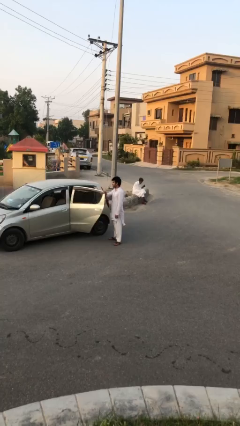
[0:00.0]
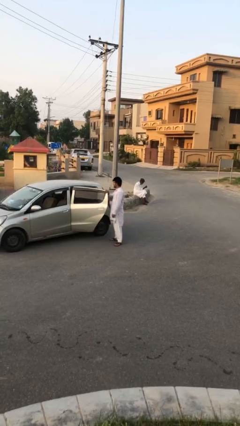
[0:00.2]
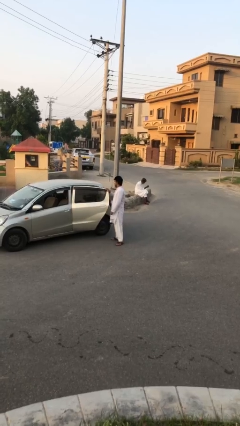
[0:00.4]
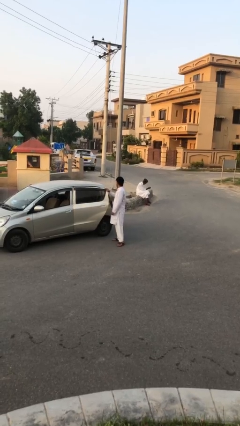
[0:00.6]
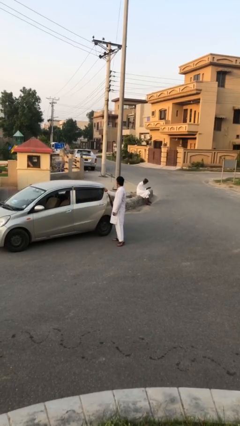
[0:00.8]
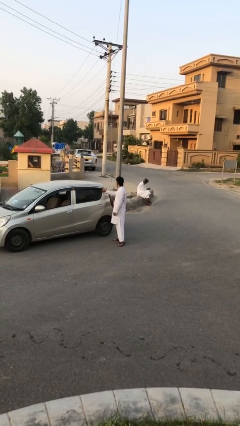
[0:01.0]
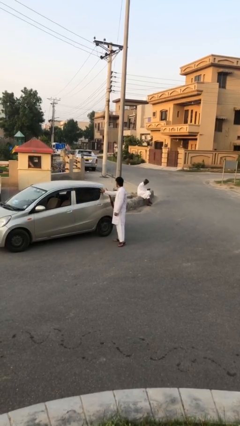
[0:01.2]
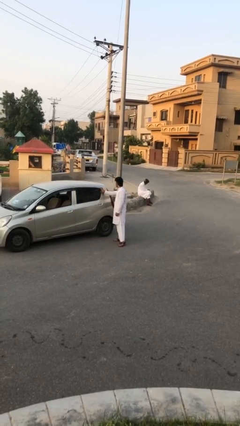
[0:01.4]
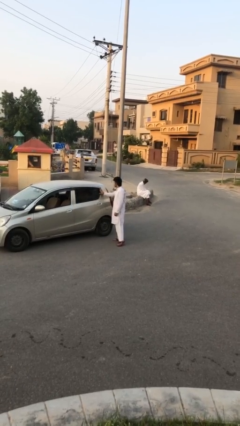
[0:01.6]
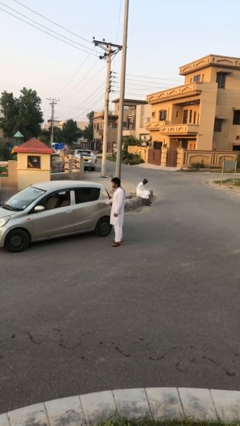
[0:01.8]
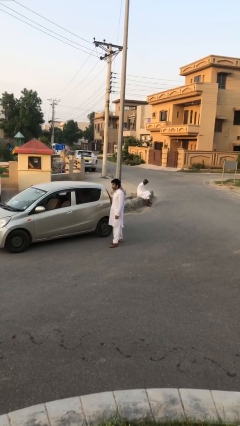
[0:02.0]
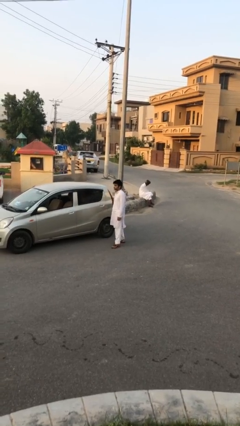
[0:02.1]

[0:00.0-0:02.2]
person closes car door

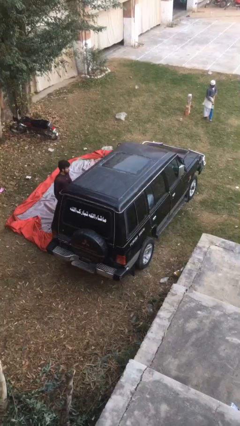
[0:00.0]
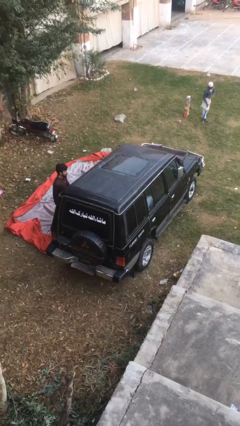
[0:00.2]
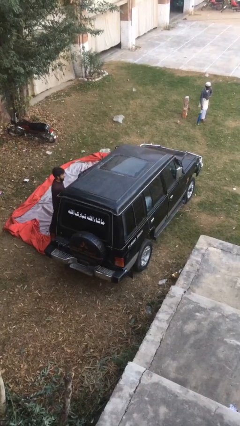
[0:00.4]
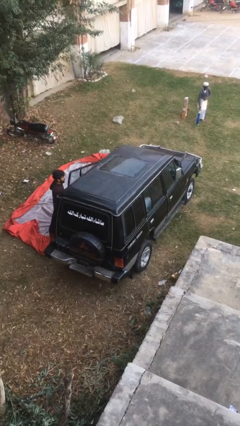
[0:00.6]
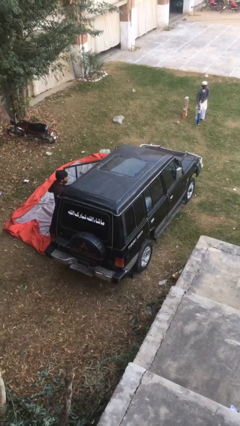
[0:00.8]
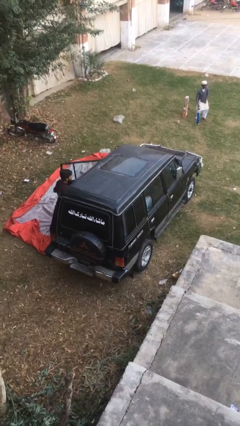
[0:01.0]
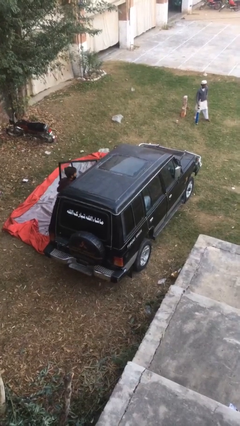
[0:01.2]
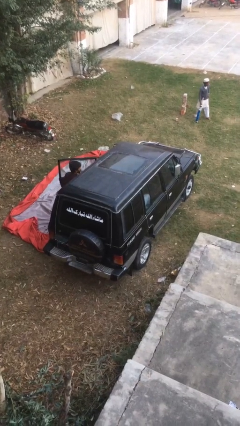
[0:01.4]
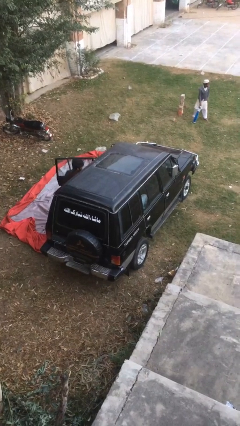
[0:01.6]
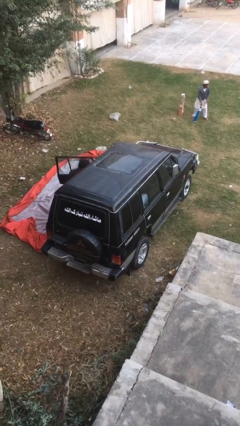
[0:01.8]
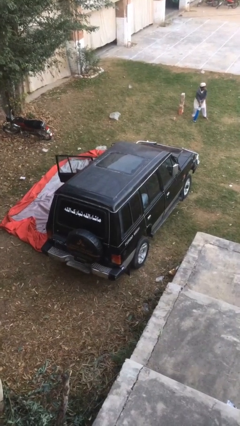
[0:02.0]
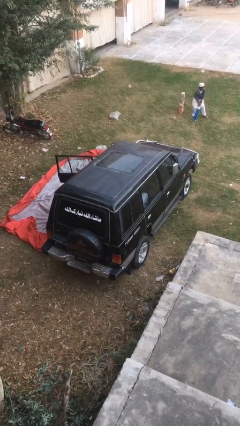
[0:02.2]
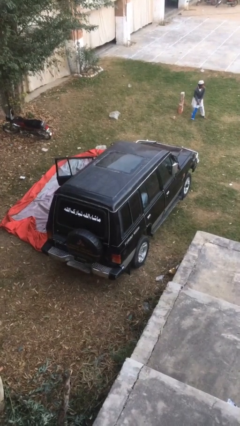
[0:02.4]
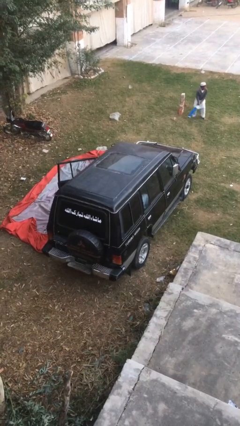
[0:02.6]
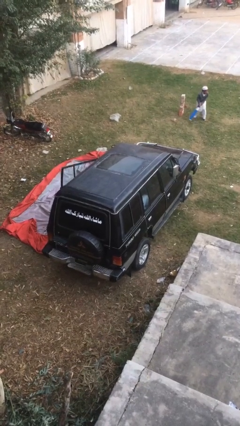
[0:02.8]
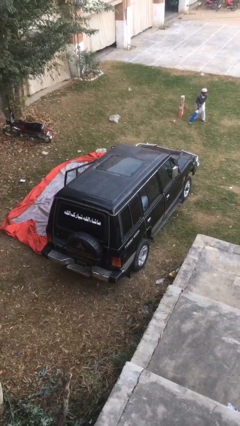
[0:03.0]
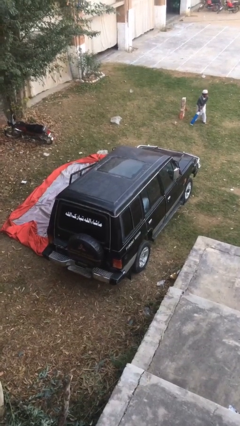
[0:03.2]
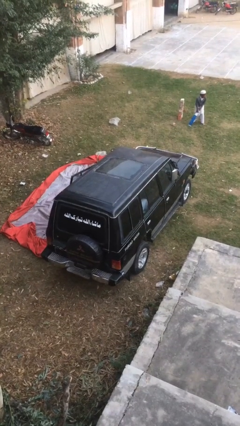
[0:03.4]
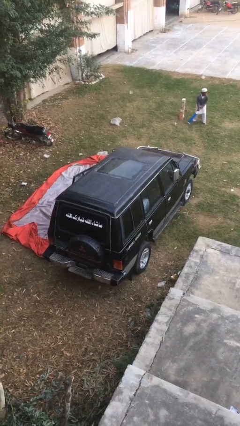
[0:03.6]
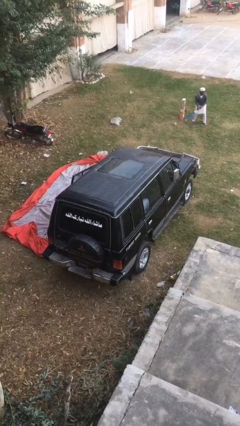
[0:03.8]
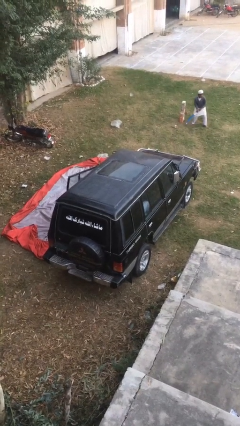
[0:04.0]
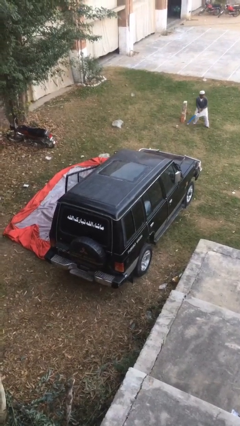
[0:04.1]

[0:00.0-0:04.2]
car picks up person

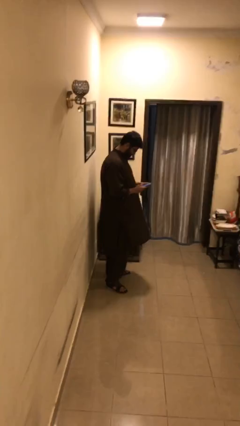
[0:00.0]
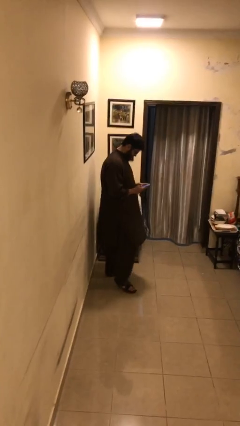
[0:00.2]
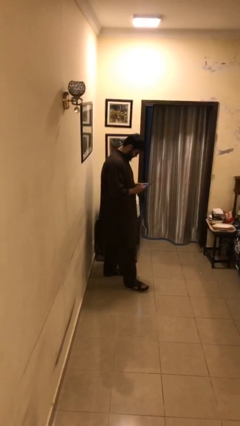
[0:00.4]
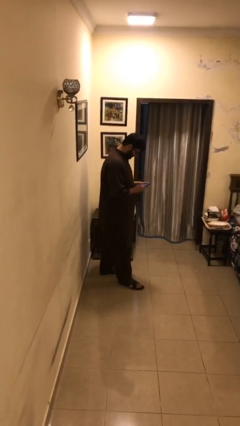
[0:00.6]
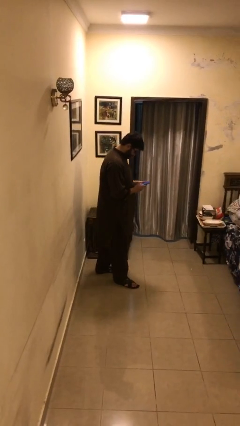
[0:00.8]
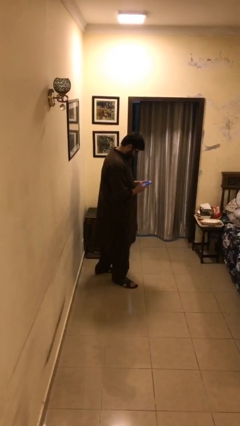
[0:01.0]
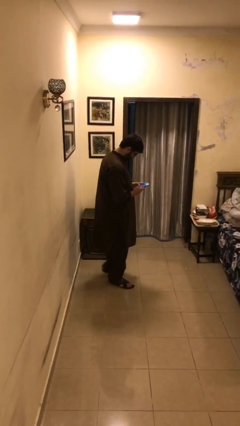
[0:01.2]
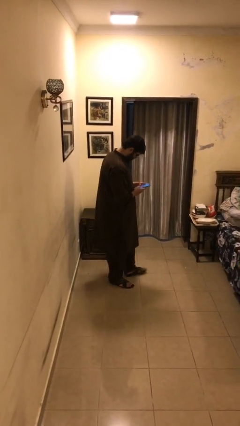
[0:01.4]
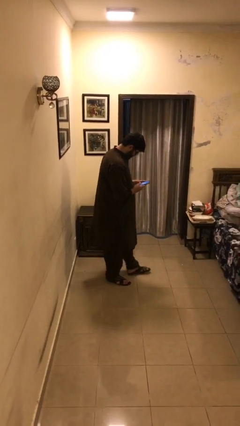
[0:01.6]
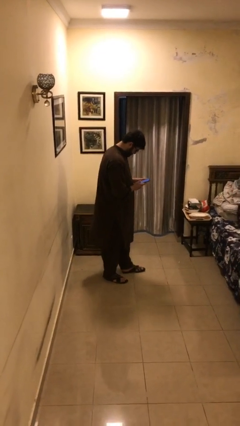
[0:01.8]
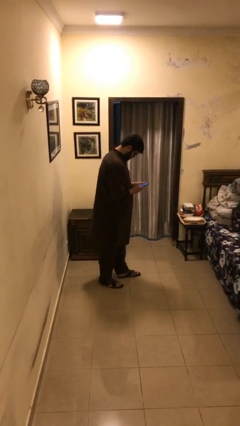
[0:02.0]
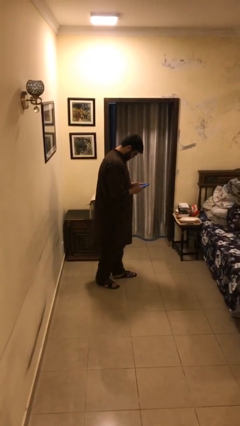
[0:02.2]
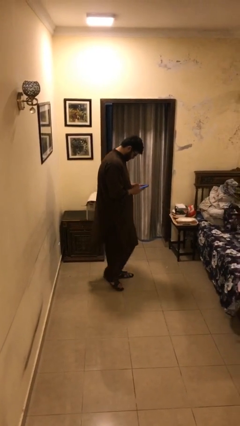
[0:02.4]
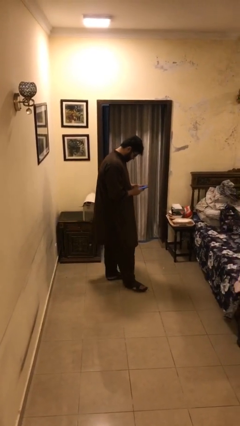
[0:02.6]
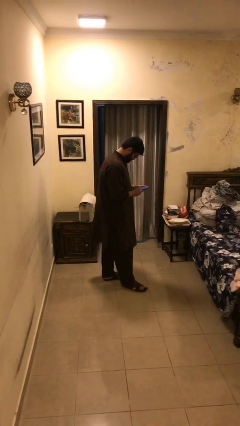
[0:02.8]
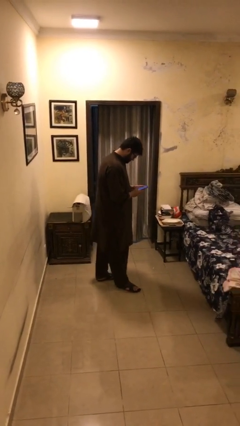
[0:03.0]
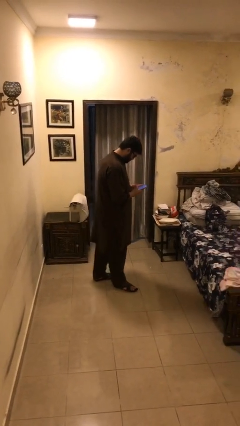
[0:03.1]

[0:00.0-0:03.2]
person texts on phone

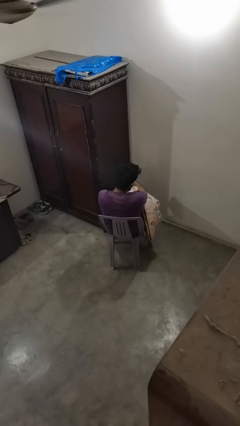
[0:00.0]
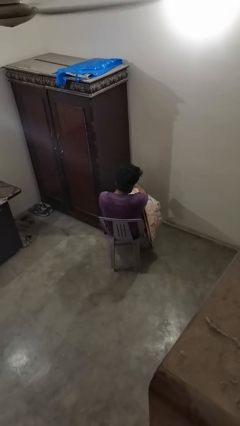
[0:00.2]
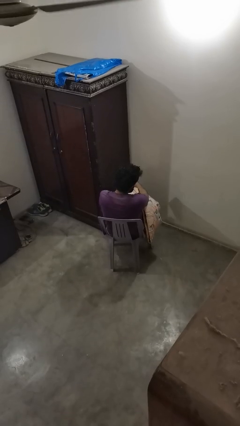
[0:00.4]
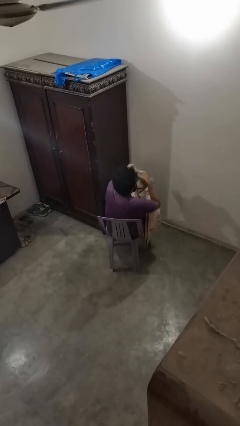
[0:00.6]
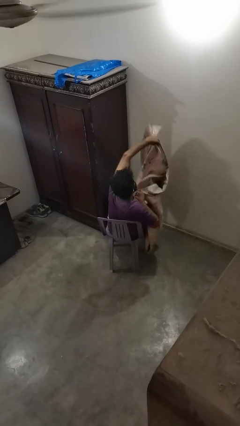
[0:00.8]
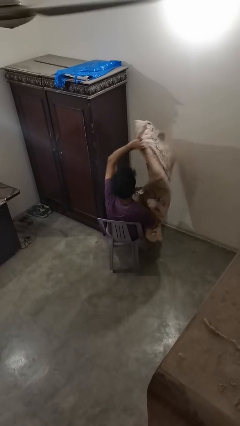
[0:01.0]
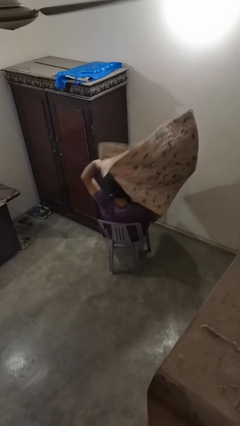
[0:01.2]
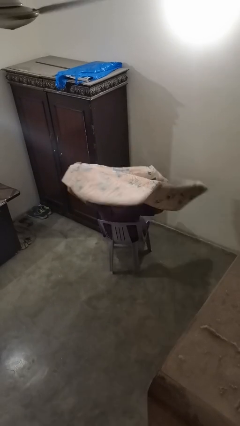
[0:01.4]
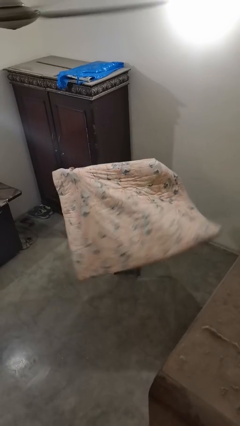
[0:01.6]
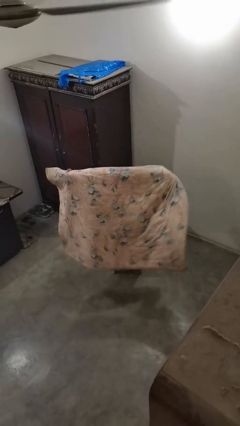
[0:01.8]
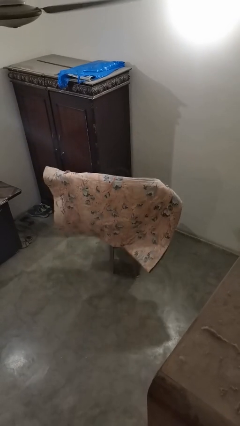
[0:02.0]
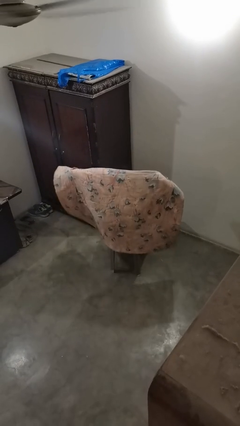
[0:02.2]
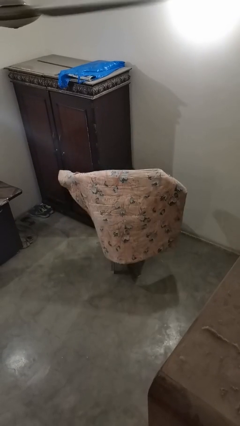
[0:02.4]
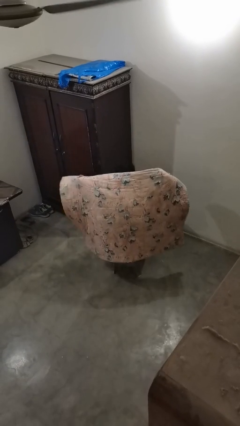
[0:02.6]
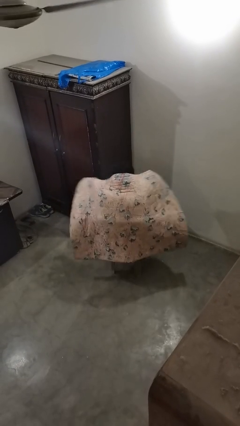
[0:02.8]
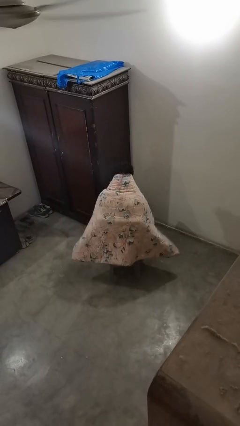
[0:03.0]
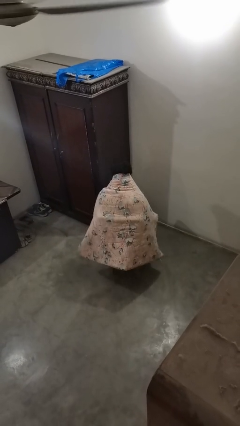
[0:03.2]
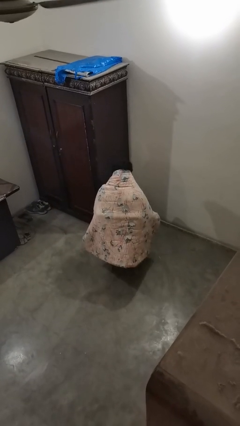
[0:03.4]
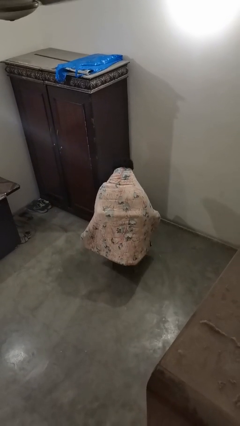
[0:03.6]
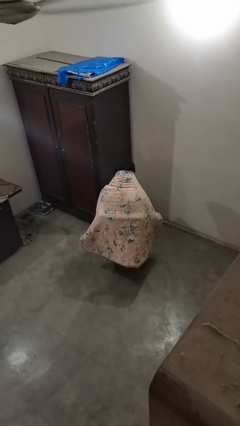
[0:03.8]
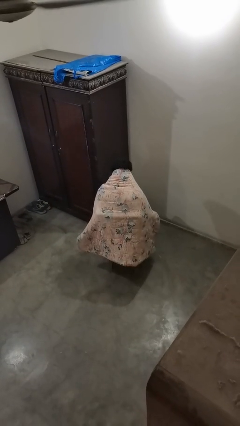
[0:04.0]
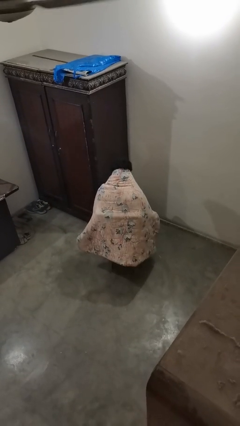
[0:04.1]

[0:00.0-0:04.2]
person covers with blanket

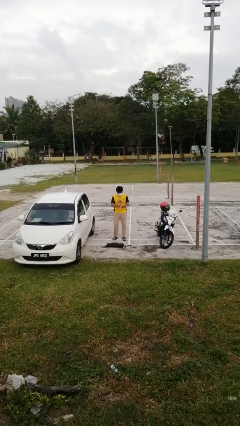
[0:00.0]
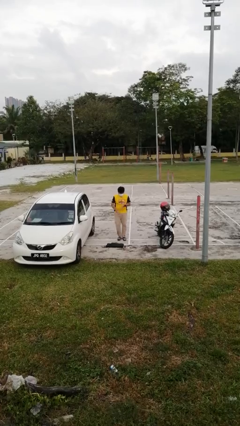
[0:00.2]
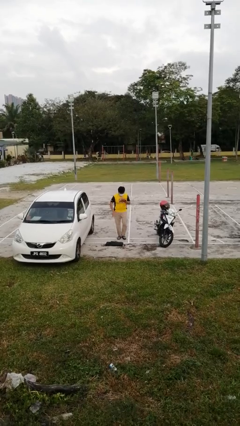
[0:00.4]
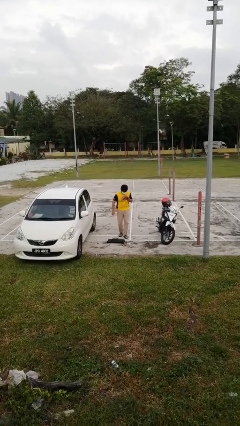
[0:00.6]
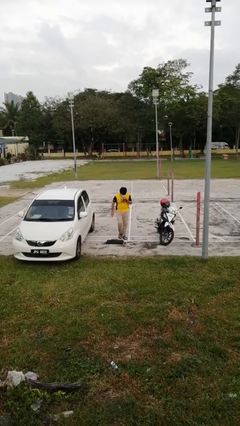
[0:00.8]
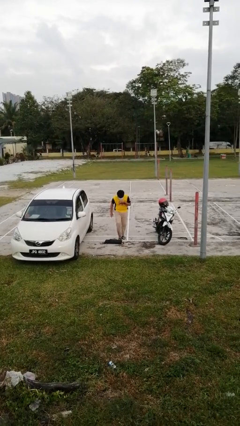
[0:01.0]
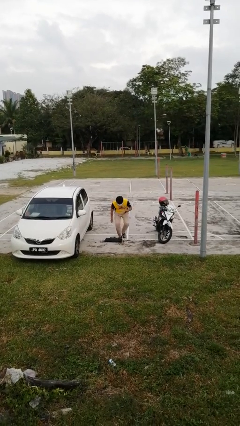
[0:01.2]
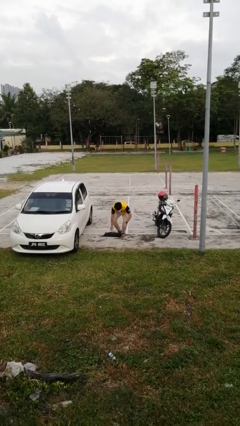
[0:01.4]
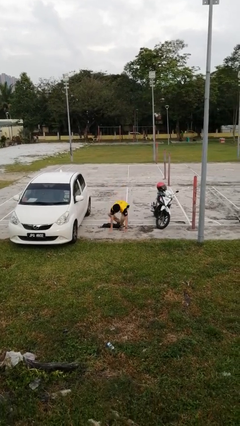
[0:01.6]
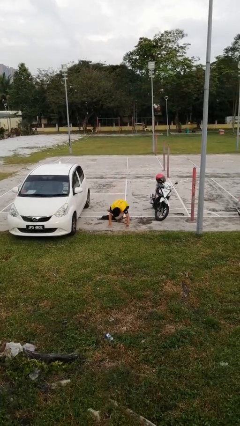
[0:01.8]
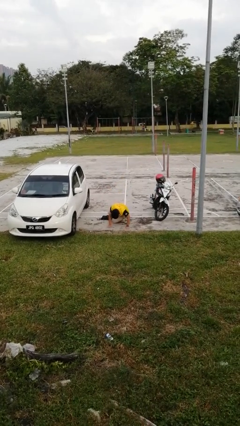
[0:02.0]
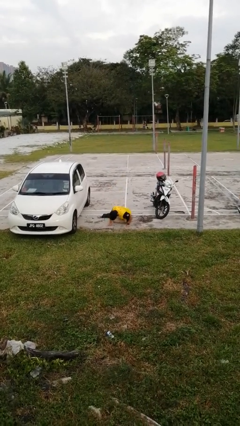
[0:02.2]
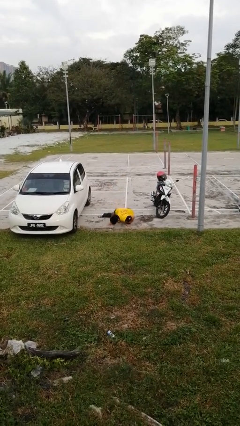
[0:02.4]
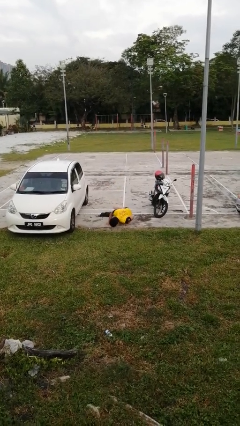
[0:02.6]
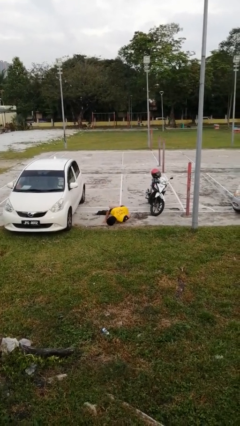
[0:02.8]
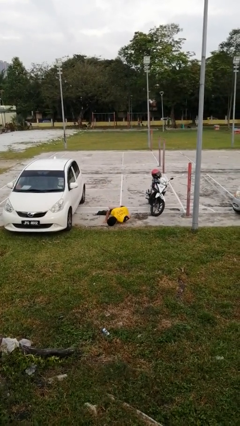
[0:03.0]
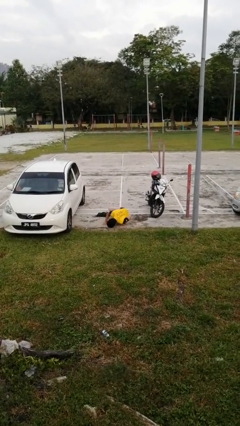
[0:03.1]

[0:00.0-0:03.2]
person trips on object on floor

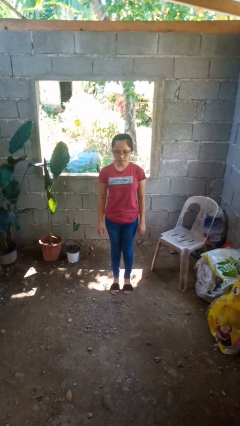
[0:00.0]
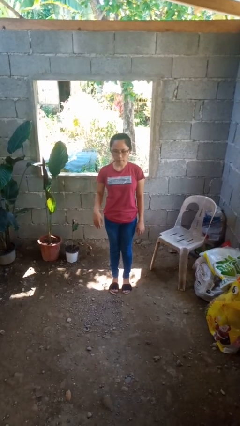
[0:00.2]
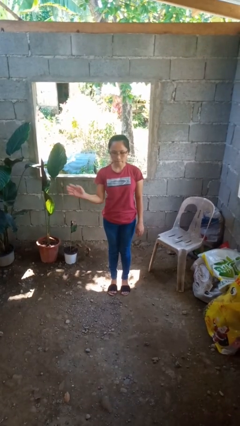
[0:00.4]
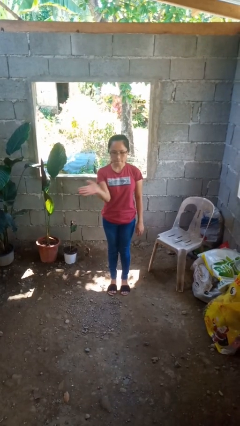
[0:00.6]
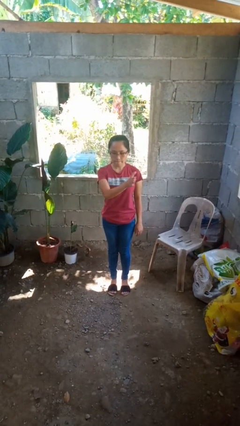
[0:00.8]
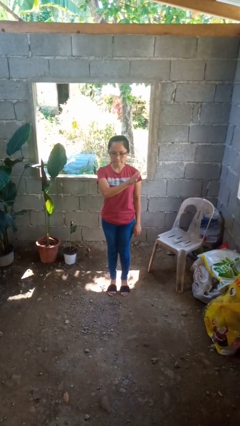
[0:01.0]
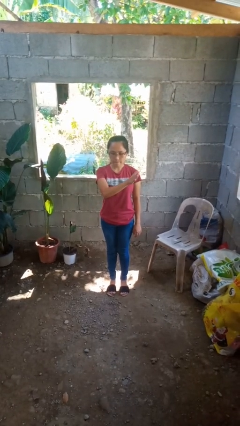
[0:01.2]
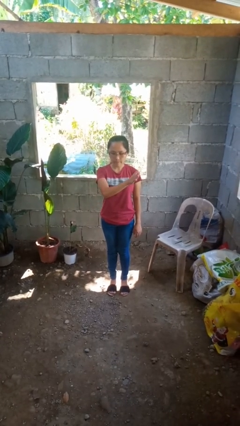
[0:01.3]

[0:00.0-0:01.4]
person gestures swipe left
